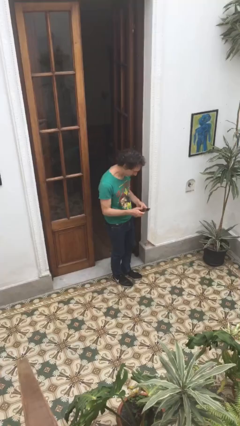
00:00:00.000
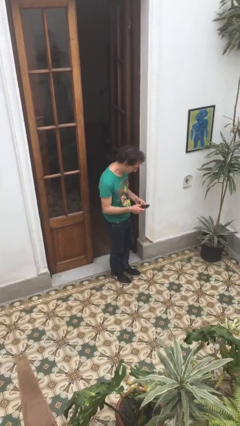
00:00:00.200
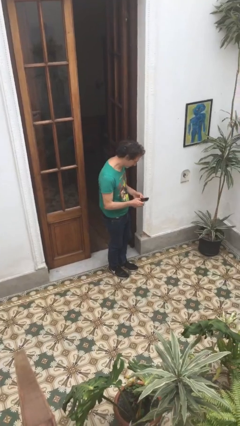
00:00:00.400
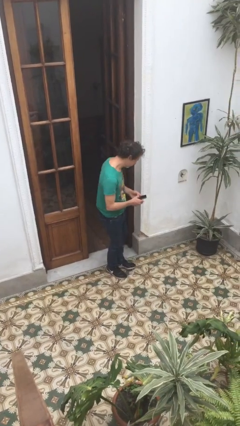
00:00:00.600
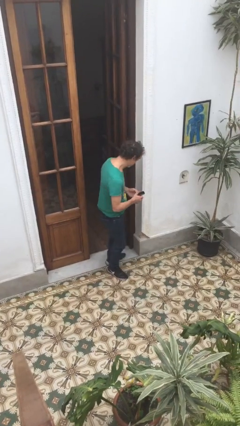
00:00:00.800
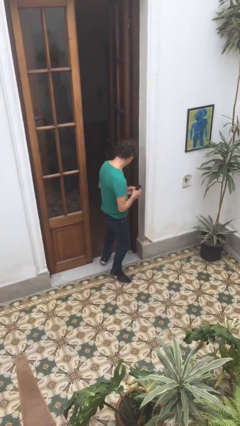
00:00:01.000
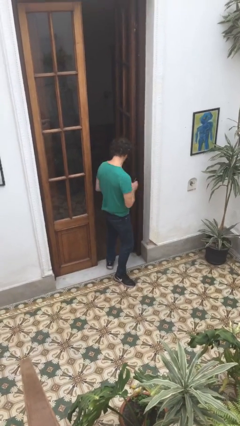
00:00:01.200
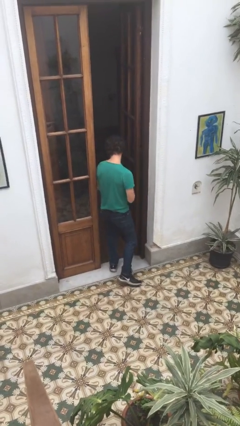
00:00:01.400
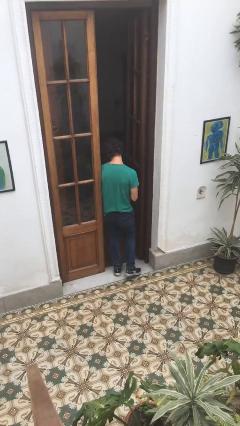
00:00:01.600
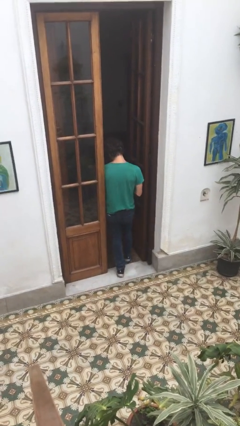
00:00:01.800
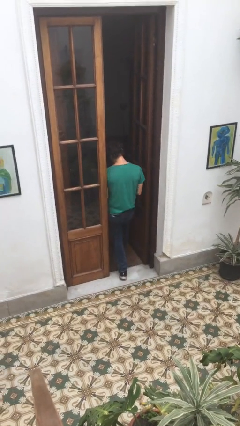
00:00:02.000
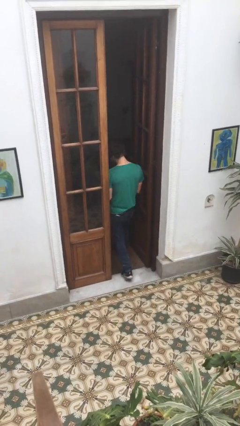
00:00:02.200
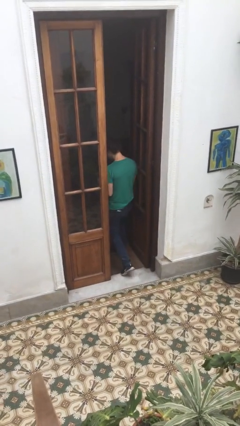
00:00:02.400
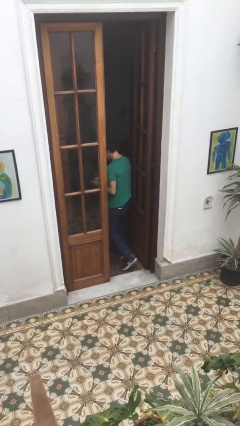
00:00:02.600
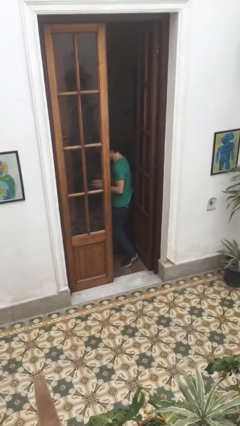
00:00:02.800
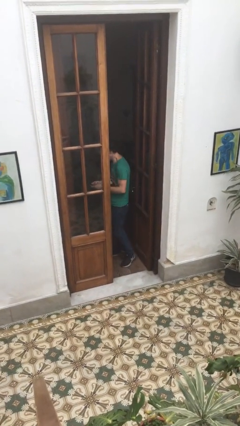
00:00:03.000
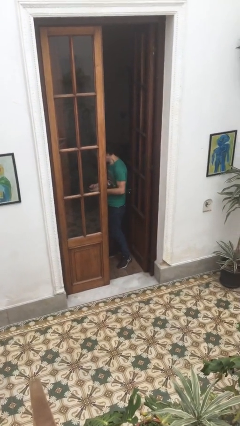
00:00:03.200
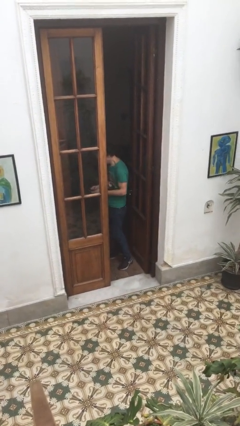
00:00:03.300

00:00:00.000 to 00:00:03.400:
person exits scene through structure

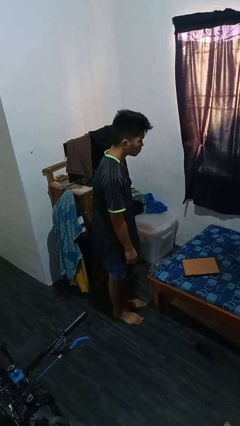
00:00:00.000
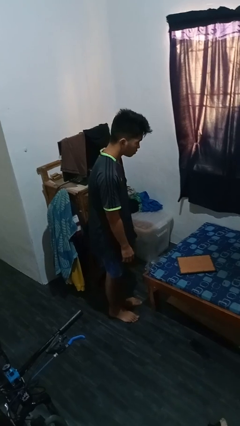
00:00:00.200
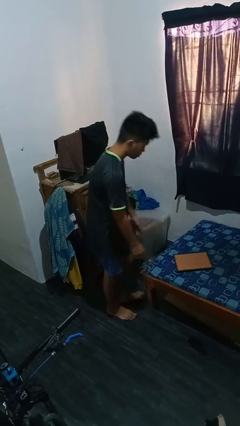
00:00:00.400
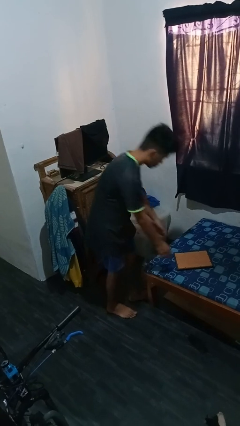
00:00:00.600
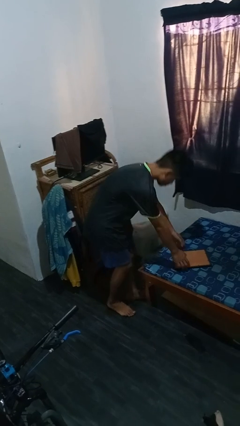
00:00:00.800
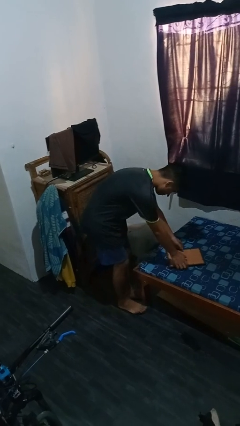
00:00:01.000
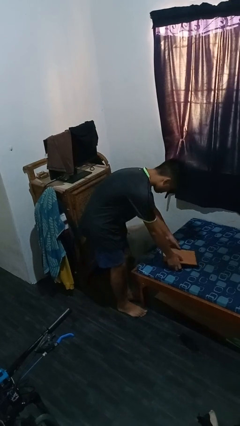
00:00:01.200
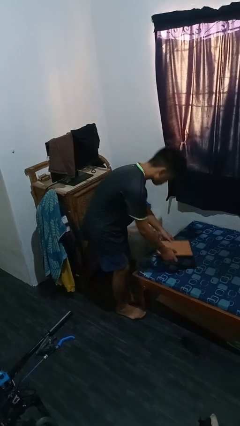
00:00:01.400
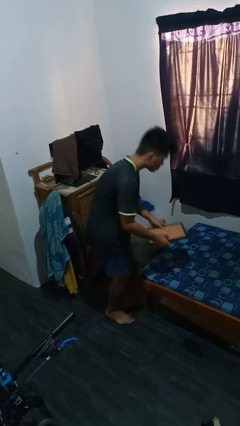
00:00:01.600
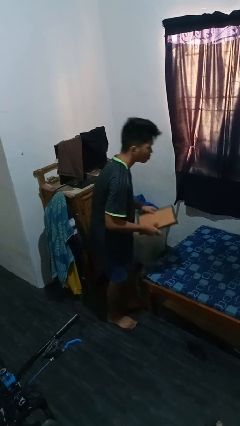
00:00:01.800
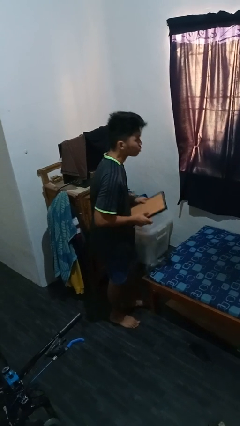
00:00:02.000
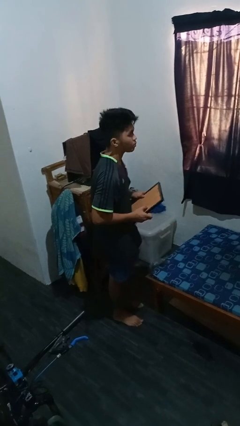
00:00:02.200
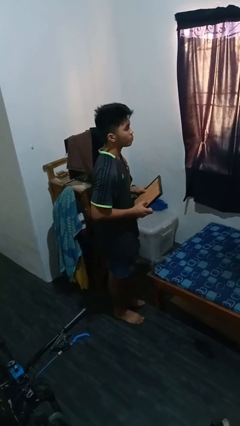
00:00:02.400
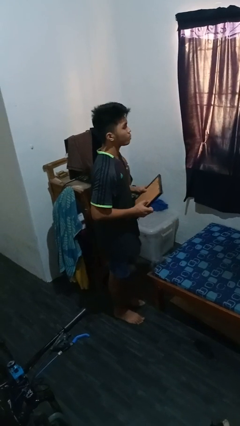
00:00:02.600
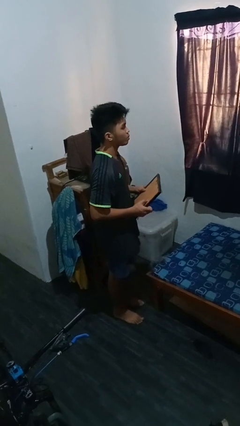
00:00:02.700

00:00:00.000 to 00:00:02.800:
person picks up object from bed

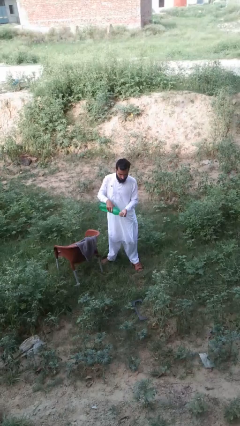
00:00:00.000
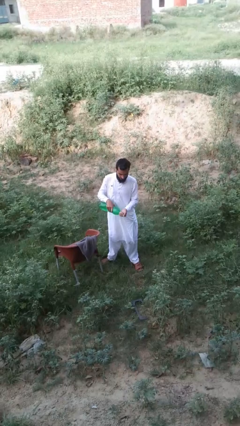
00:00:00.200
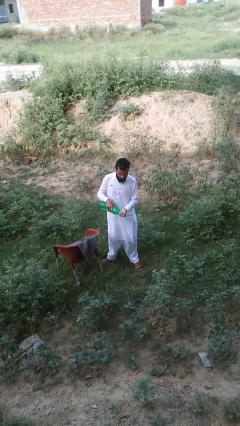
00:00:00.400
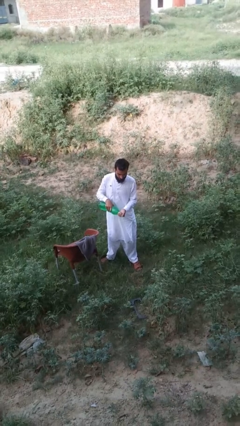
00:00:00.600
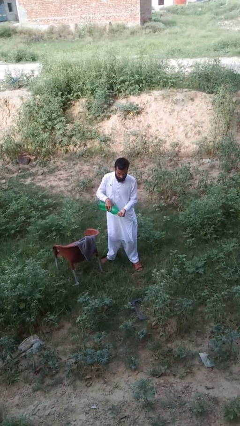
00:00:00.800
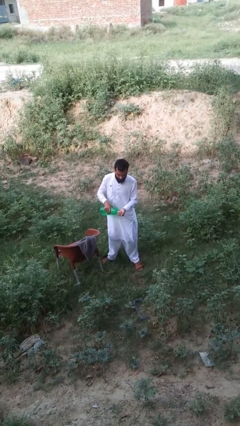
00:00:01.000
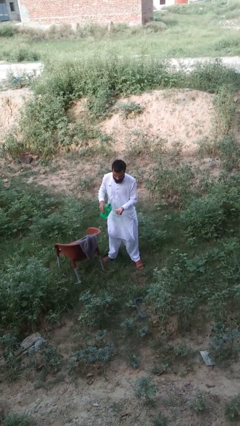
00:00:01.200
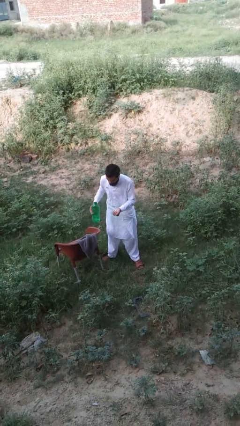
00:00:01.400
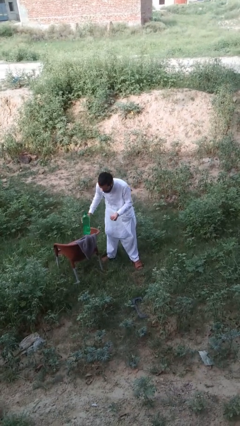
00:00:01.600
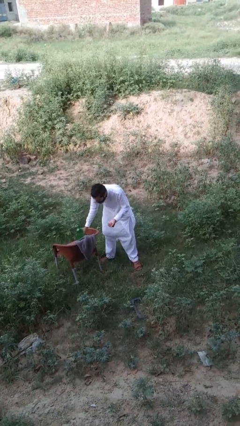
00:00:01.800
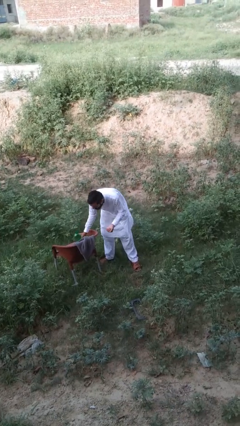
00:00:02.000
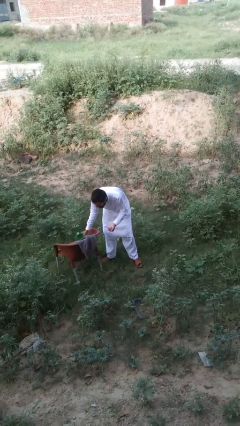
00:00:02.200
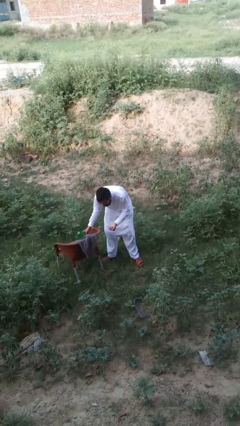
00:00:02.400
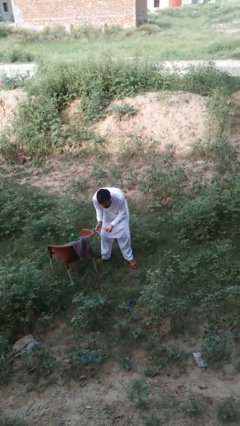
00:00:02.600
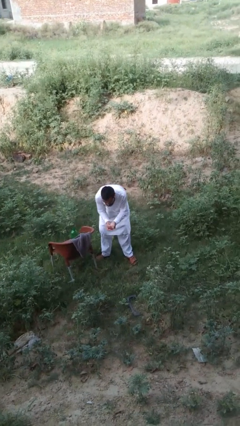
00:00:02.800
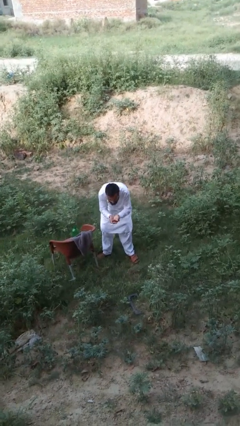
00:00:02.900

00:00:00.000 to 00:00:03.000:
person washes face

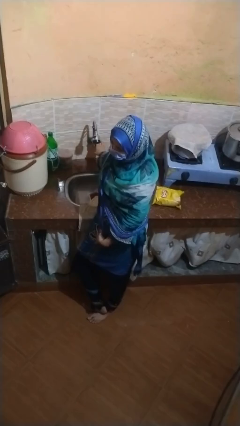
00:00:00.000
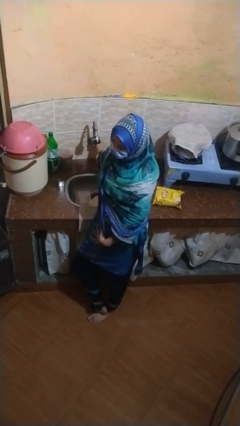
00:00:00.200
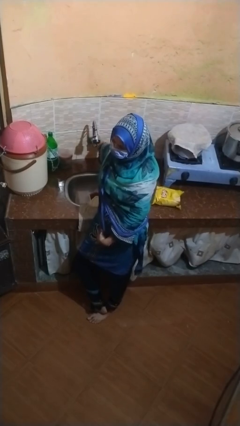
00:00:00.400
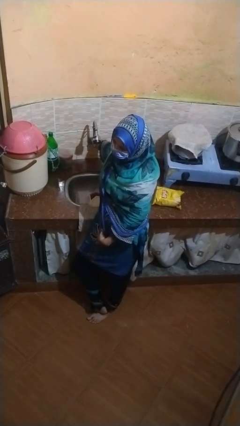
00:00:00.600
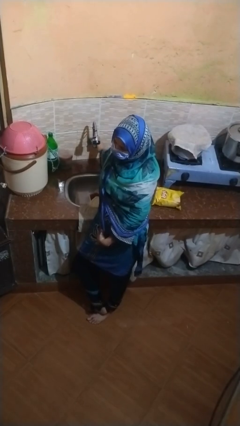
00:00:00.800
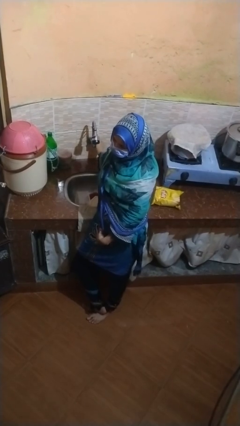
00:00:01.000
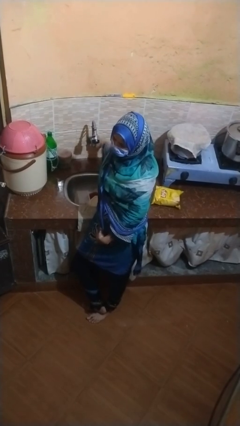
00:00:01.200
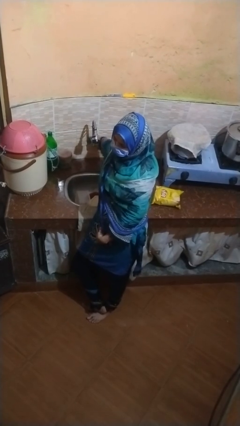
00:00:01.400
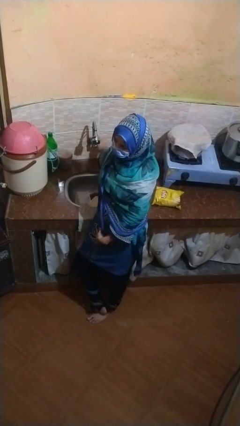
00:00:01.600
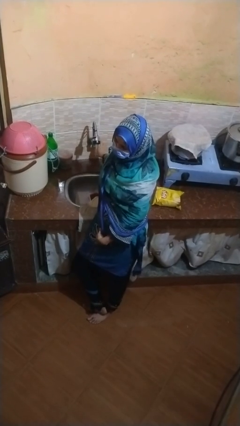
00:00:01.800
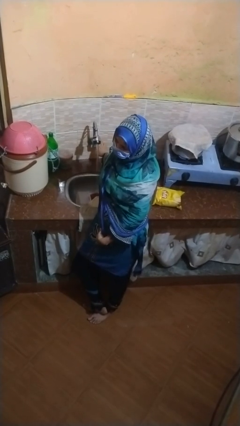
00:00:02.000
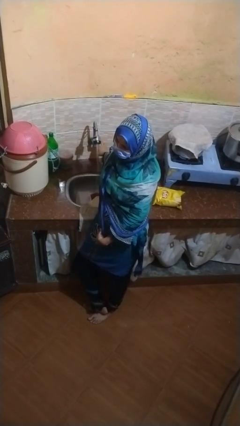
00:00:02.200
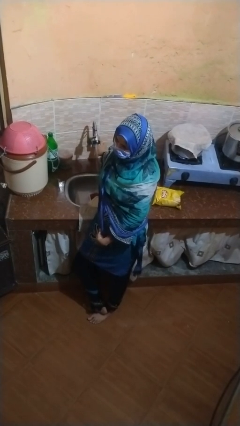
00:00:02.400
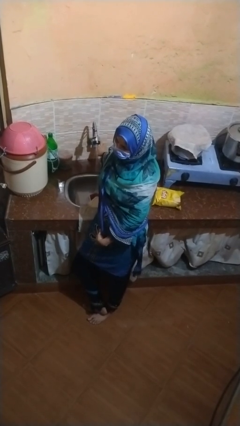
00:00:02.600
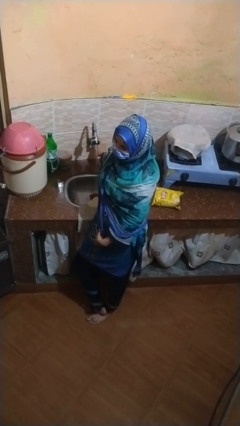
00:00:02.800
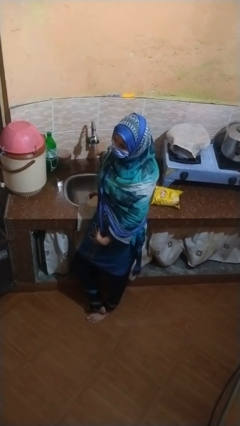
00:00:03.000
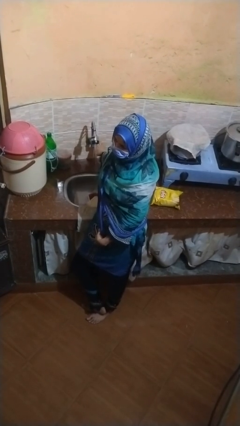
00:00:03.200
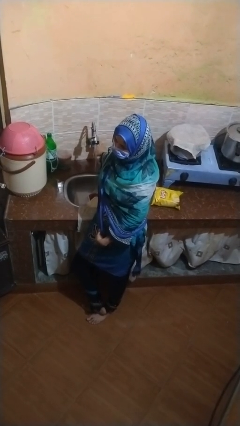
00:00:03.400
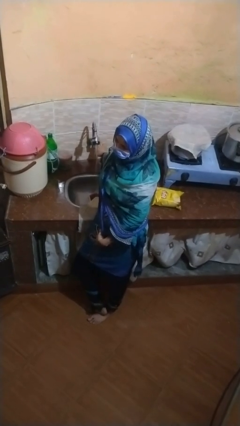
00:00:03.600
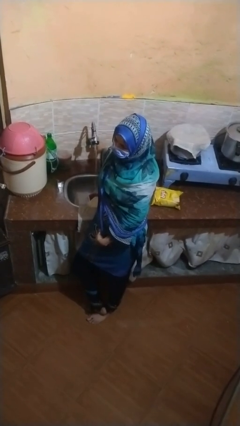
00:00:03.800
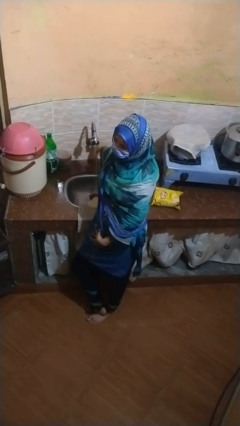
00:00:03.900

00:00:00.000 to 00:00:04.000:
person turns on faucet

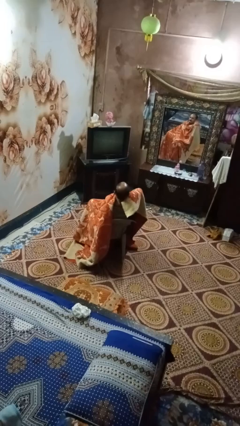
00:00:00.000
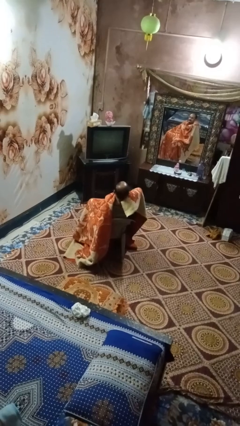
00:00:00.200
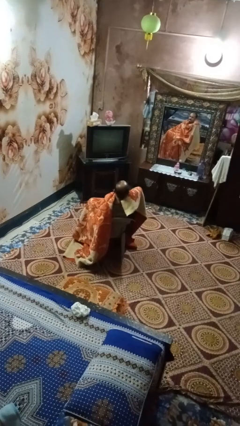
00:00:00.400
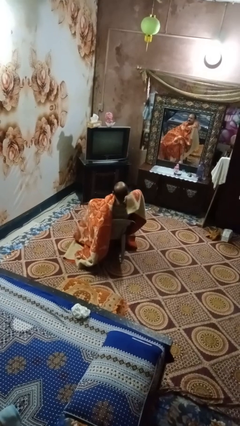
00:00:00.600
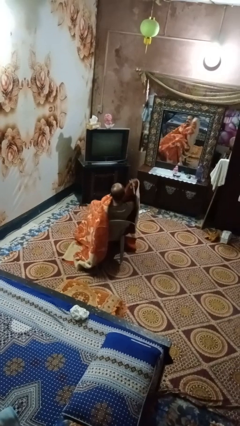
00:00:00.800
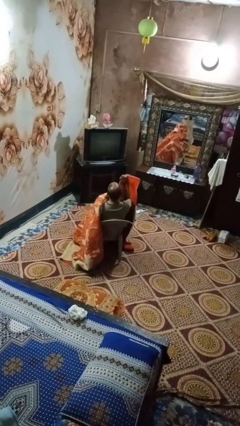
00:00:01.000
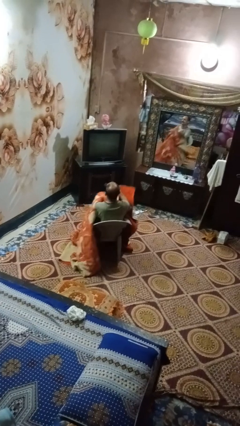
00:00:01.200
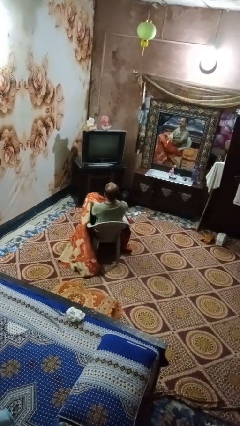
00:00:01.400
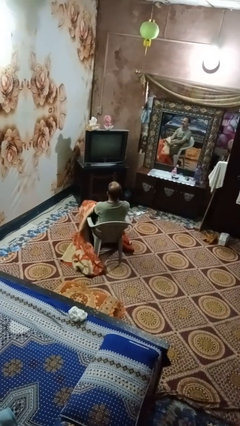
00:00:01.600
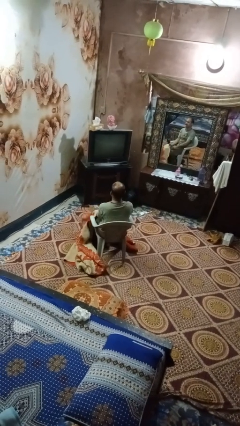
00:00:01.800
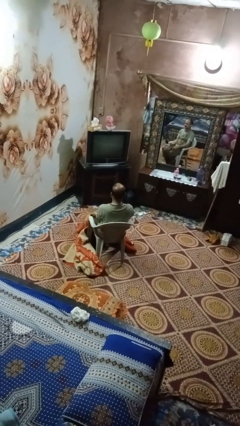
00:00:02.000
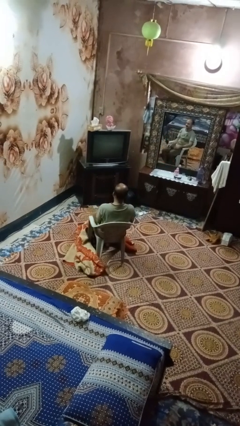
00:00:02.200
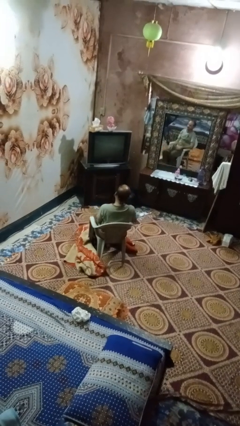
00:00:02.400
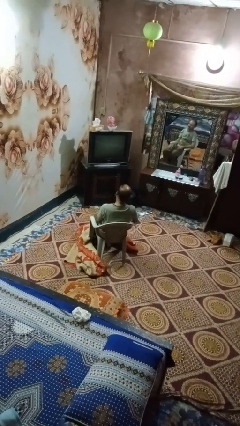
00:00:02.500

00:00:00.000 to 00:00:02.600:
person uncovers with blanket

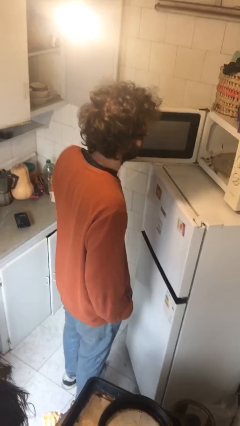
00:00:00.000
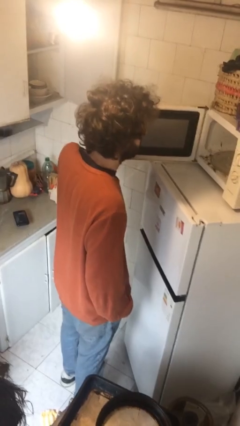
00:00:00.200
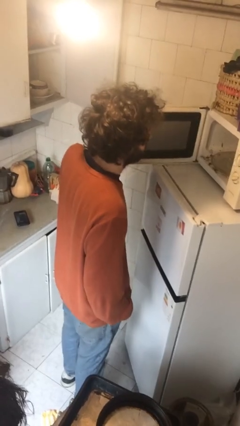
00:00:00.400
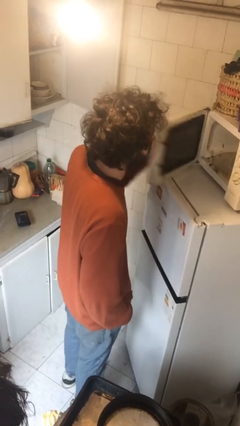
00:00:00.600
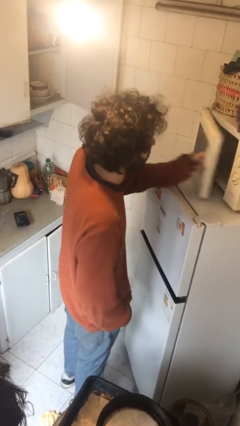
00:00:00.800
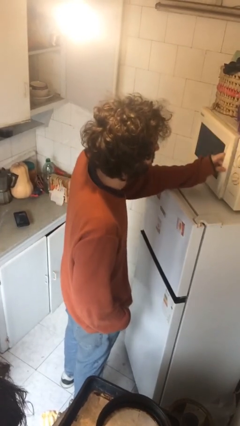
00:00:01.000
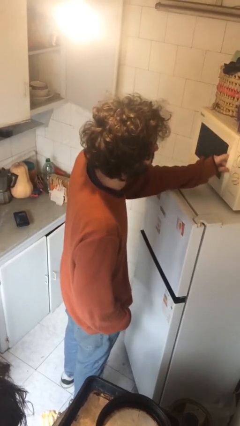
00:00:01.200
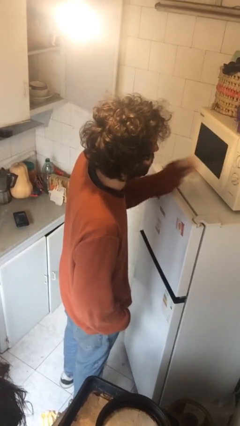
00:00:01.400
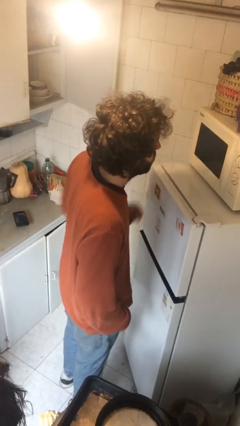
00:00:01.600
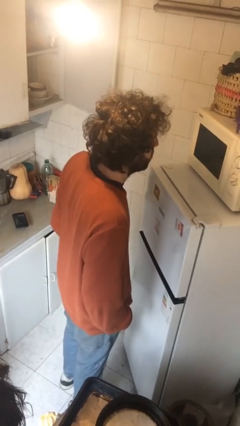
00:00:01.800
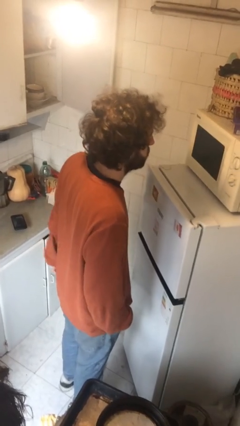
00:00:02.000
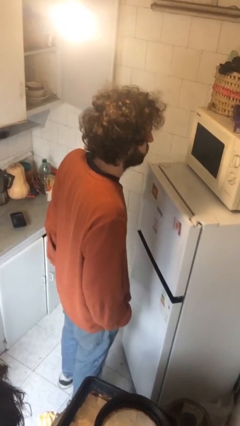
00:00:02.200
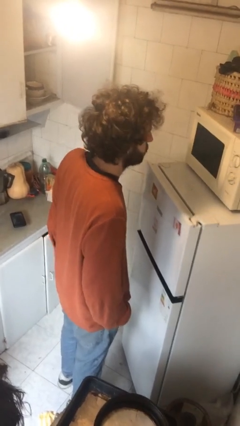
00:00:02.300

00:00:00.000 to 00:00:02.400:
person closes microwave
